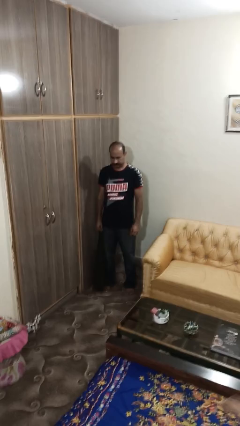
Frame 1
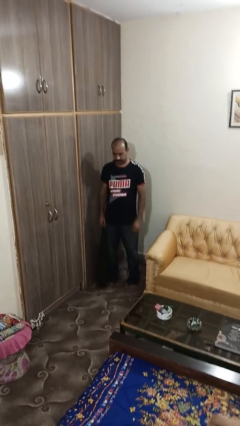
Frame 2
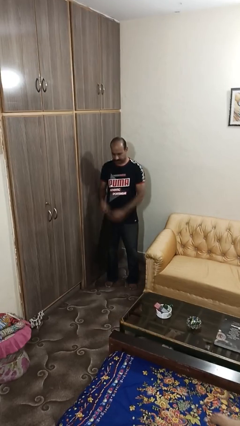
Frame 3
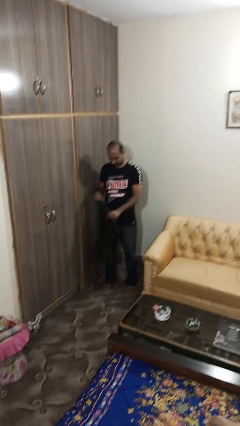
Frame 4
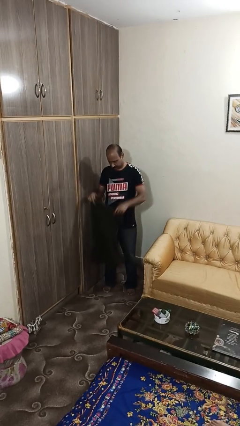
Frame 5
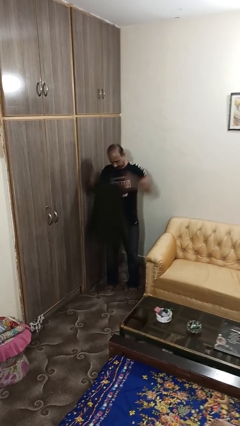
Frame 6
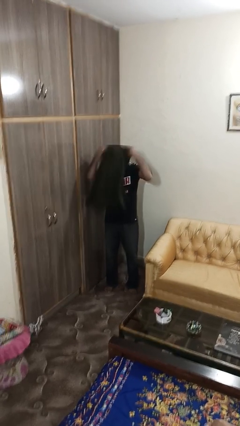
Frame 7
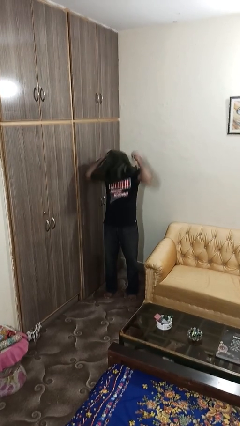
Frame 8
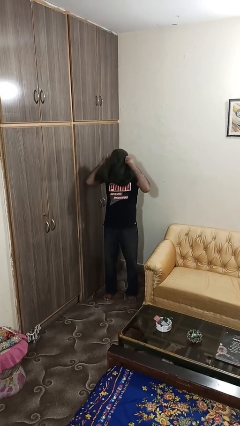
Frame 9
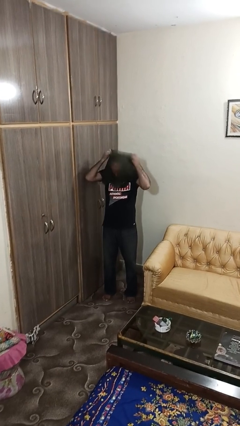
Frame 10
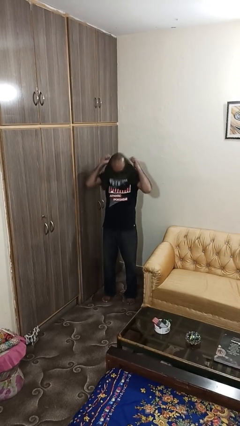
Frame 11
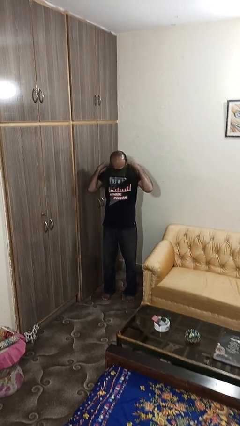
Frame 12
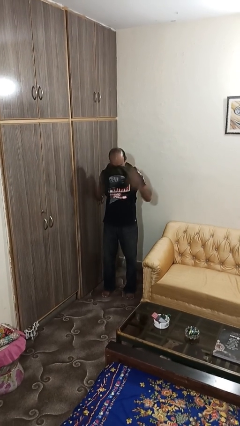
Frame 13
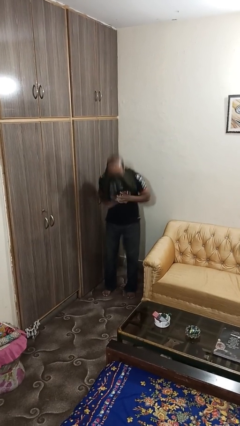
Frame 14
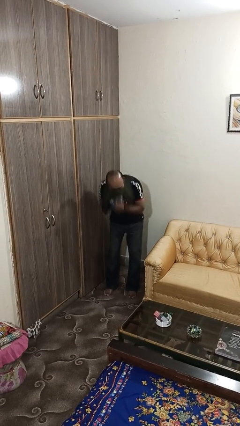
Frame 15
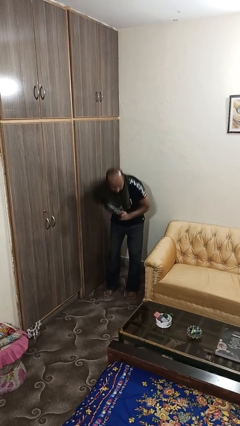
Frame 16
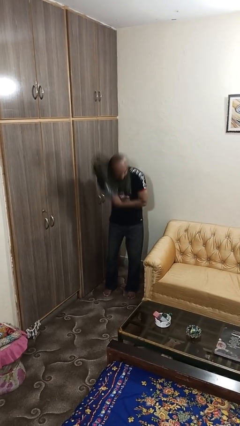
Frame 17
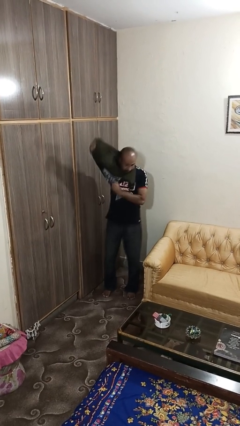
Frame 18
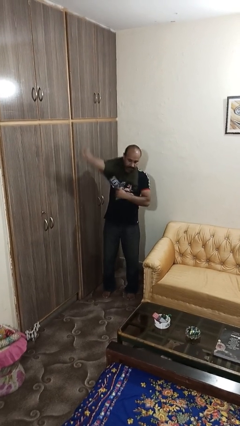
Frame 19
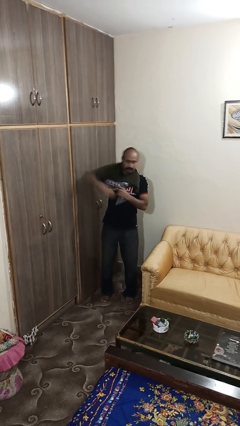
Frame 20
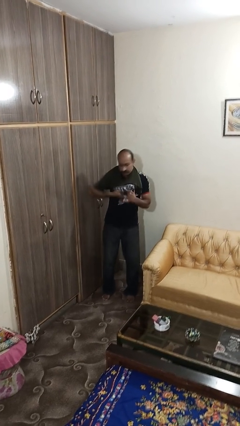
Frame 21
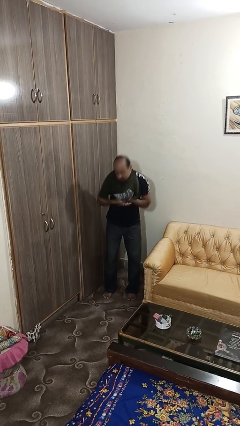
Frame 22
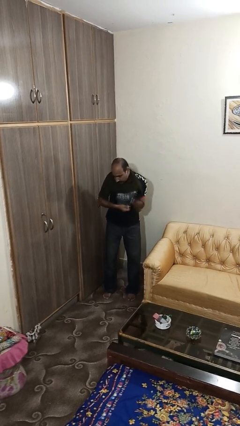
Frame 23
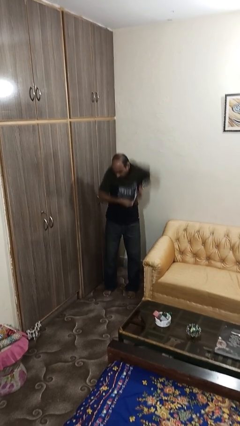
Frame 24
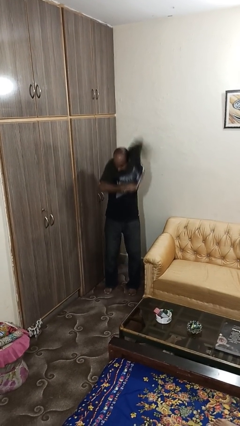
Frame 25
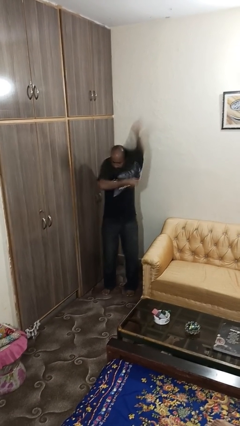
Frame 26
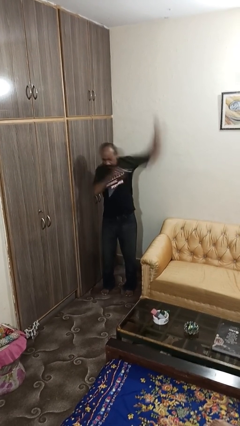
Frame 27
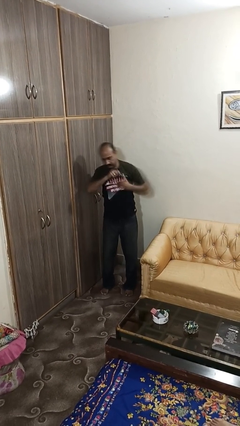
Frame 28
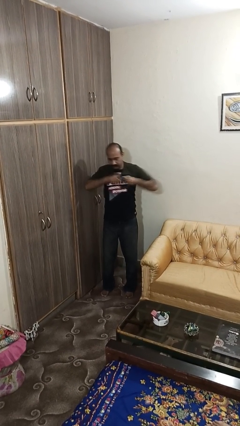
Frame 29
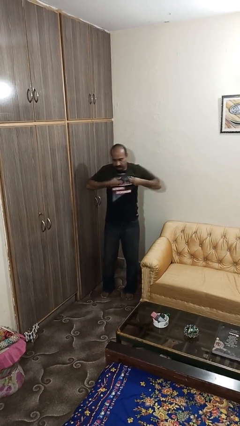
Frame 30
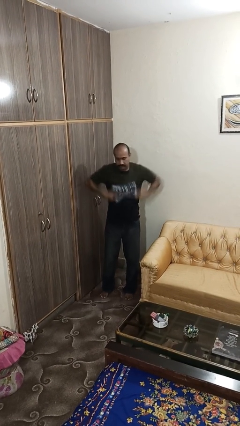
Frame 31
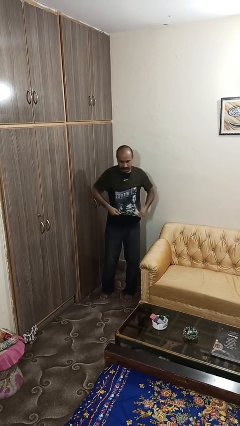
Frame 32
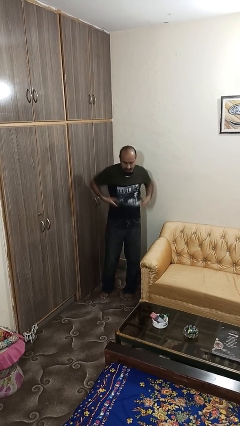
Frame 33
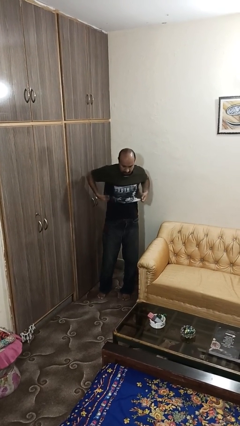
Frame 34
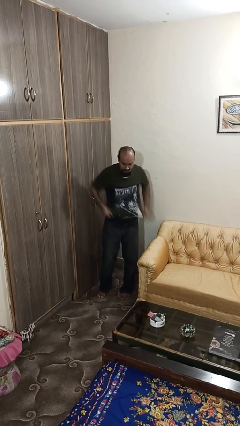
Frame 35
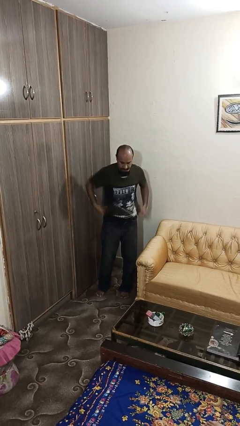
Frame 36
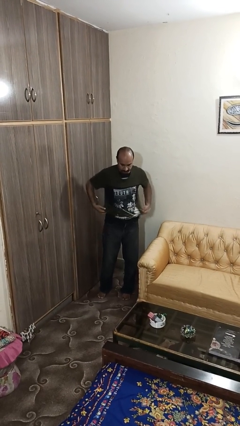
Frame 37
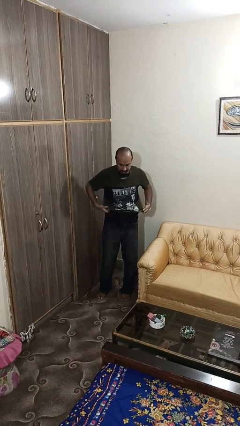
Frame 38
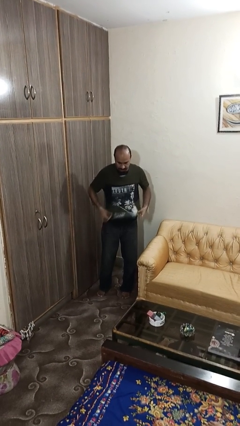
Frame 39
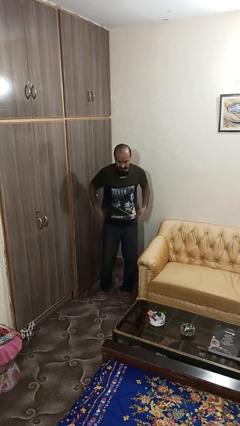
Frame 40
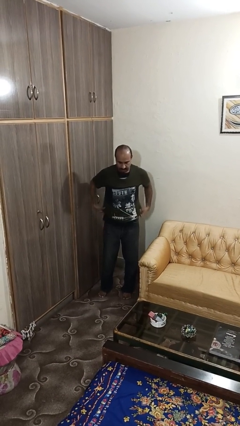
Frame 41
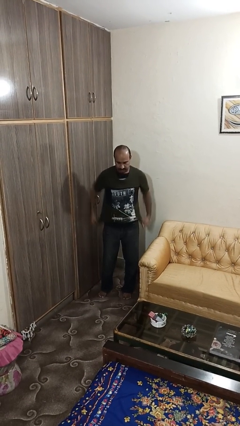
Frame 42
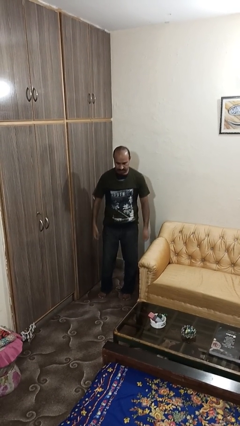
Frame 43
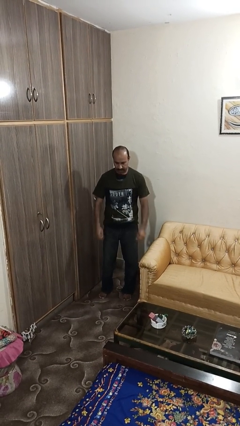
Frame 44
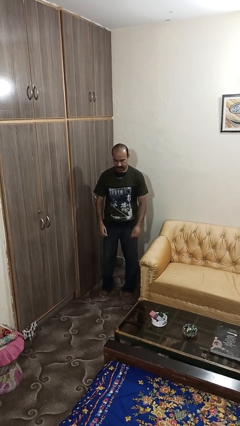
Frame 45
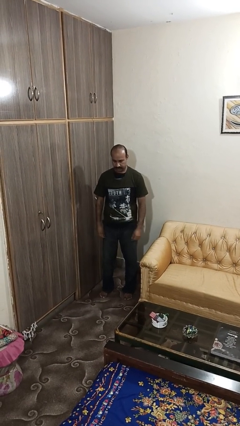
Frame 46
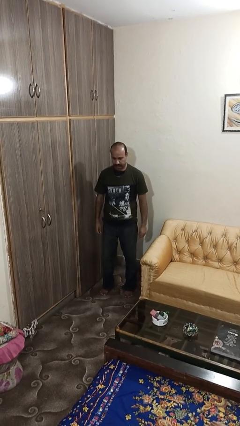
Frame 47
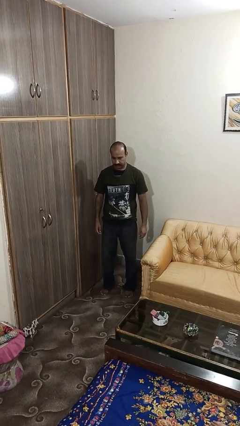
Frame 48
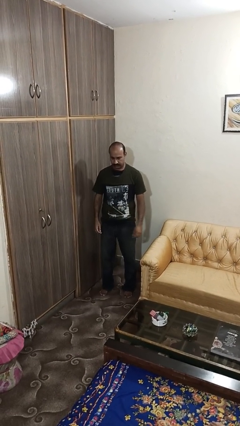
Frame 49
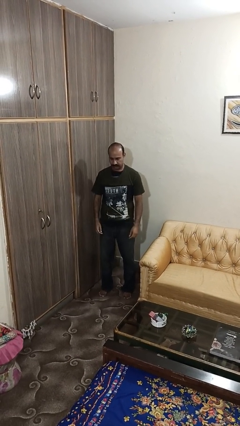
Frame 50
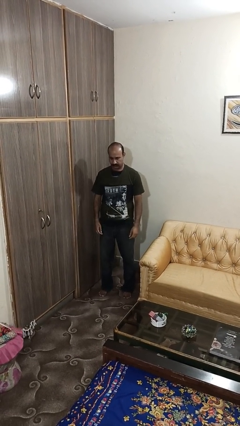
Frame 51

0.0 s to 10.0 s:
person puts on shirt

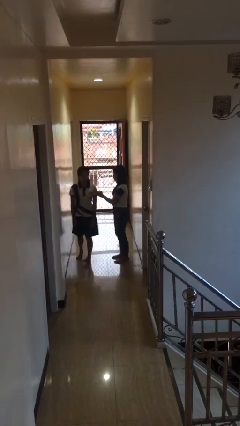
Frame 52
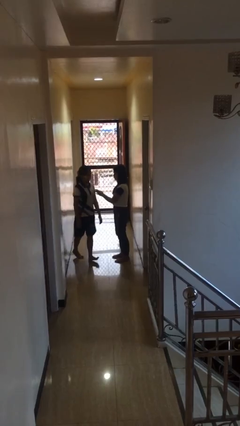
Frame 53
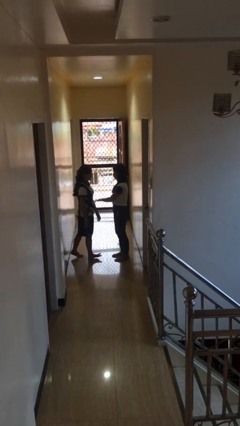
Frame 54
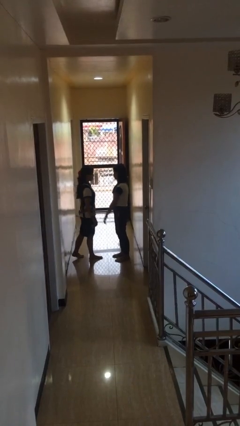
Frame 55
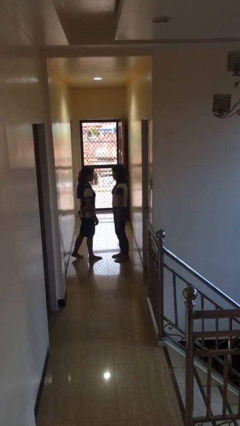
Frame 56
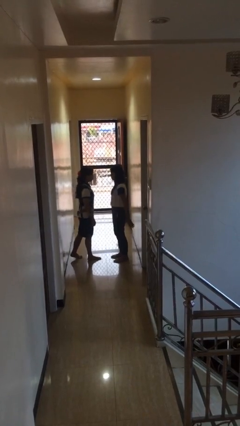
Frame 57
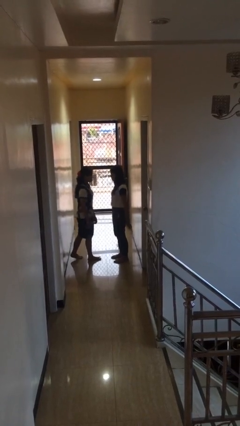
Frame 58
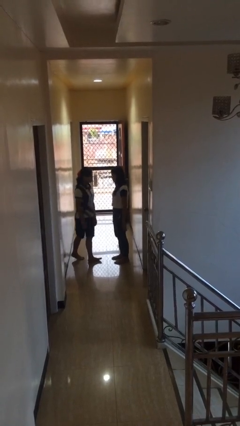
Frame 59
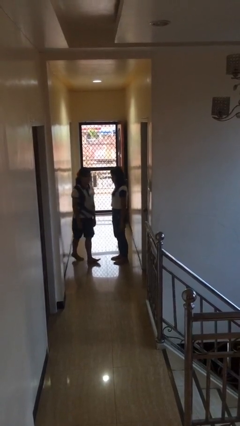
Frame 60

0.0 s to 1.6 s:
person spins person around

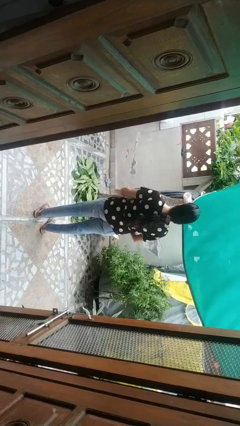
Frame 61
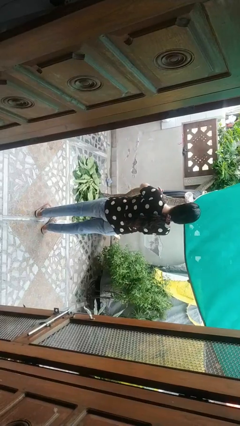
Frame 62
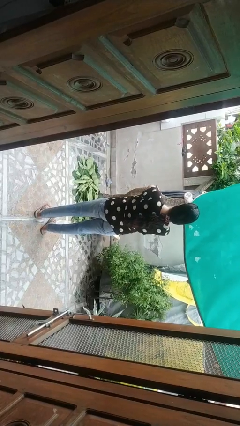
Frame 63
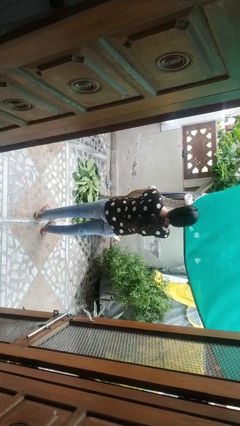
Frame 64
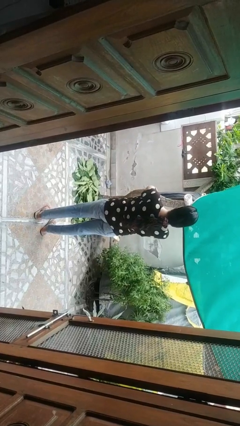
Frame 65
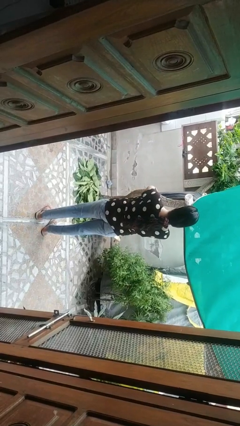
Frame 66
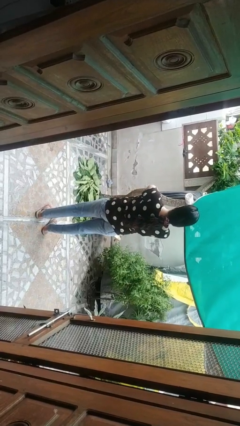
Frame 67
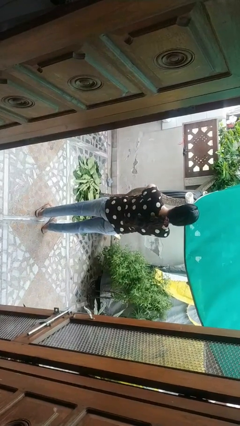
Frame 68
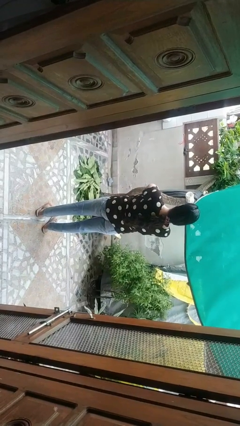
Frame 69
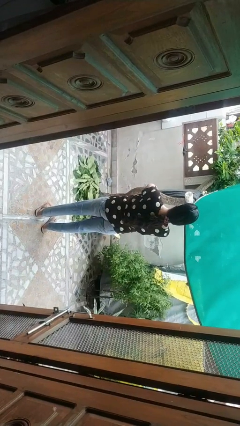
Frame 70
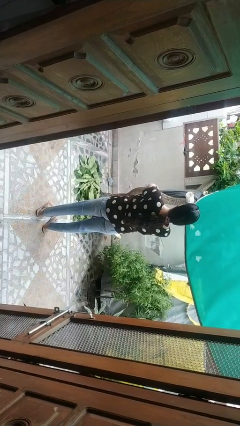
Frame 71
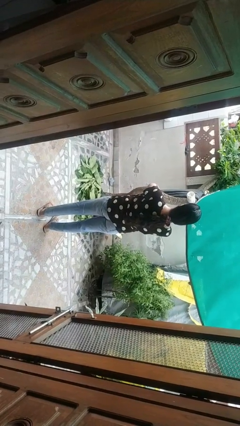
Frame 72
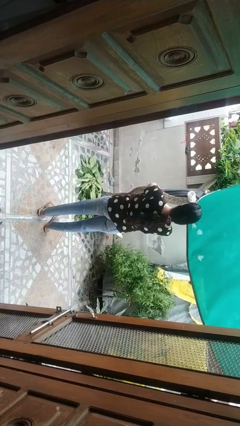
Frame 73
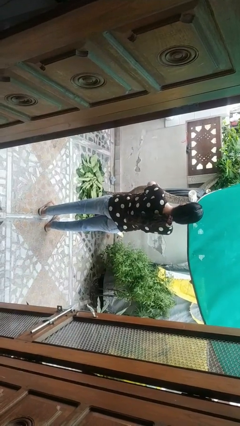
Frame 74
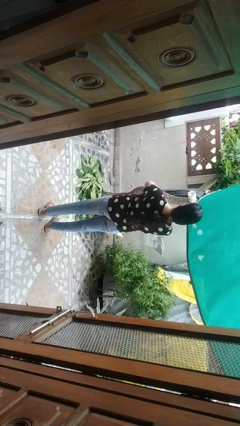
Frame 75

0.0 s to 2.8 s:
person crosses arms

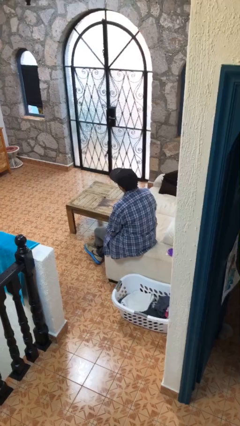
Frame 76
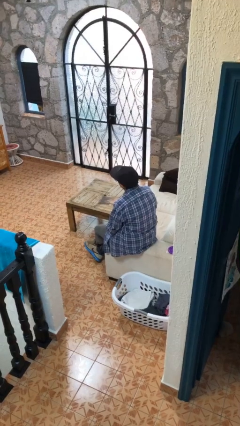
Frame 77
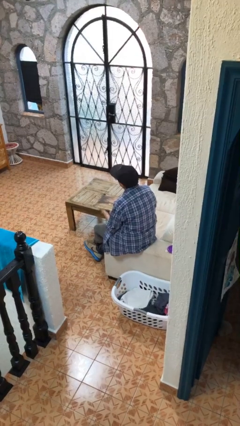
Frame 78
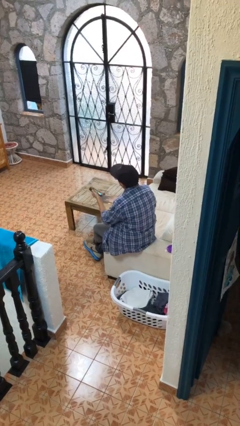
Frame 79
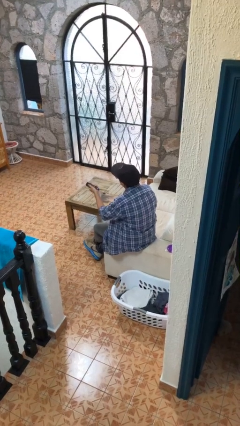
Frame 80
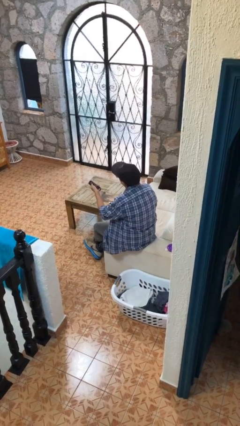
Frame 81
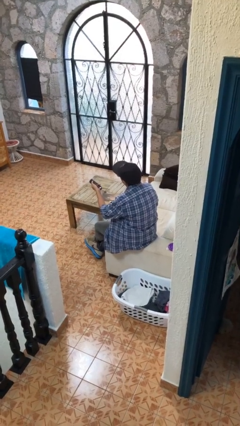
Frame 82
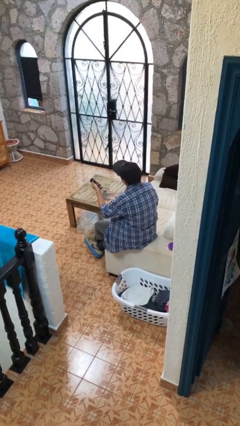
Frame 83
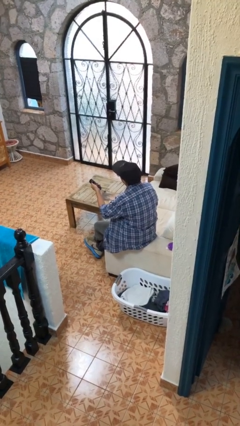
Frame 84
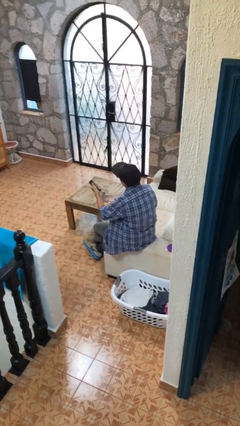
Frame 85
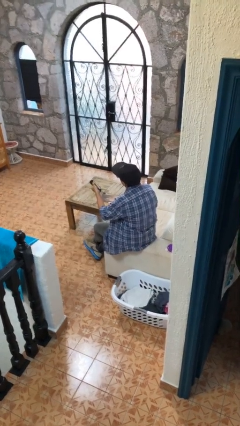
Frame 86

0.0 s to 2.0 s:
person uses television remote

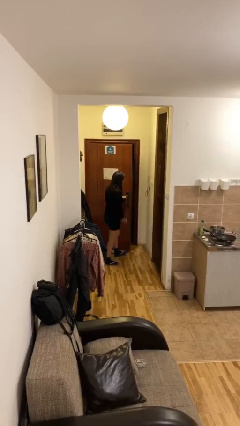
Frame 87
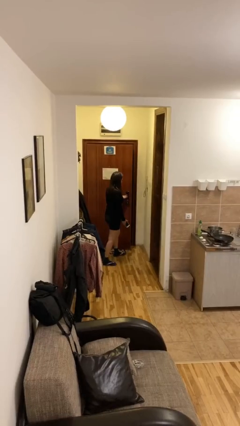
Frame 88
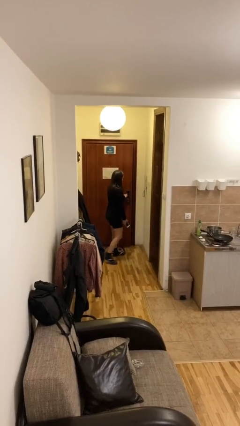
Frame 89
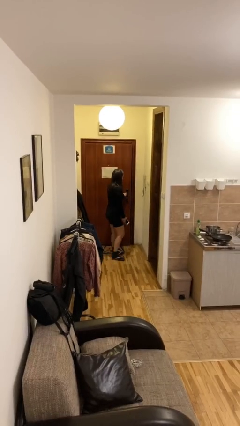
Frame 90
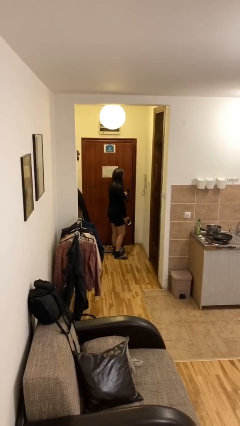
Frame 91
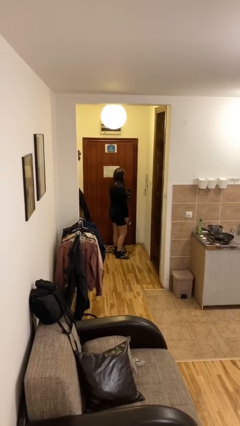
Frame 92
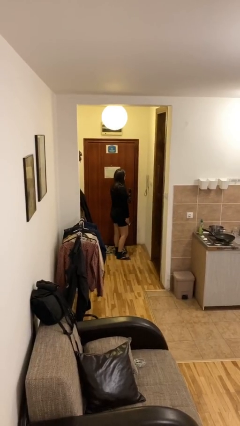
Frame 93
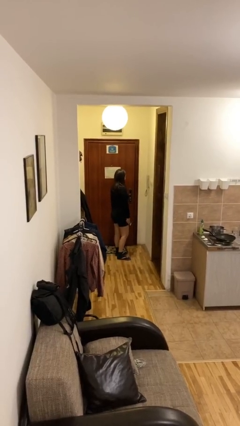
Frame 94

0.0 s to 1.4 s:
person closes facility door
